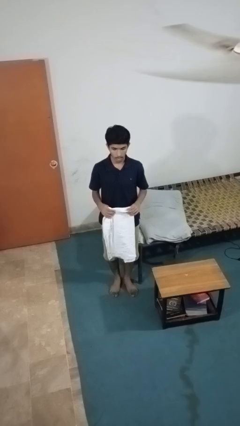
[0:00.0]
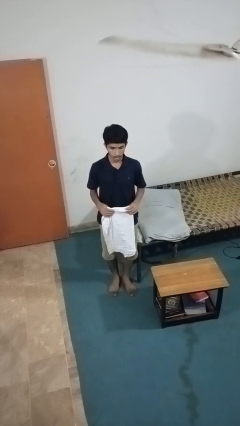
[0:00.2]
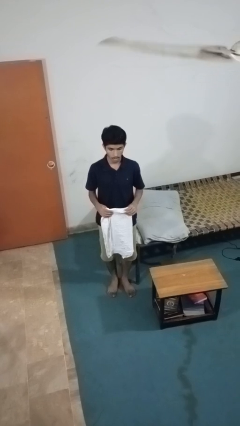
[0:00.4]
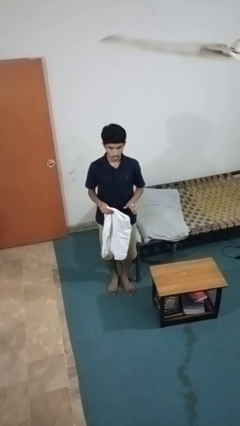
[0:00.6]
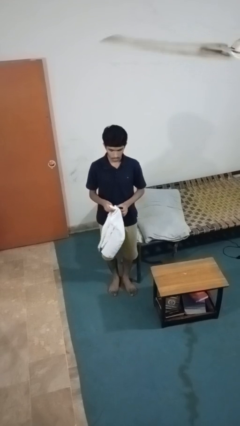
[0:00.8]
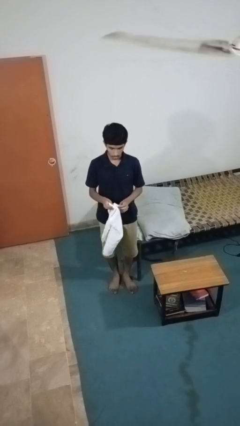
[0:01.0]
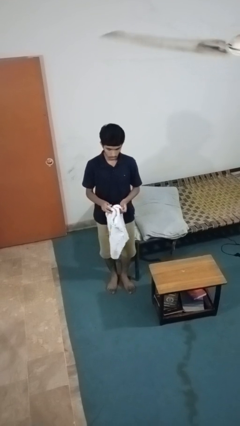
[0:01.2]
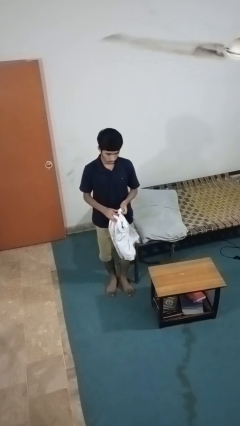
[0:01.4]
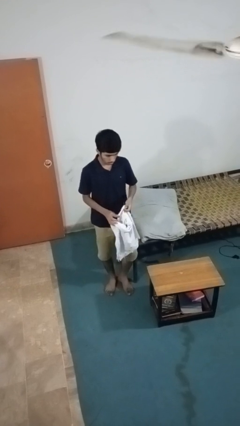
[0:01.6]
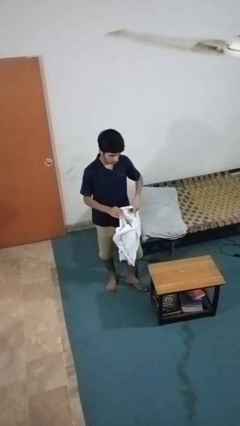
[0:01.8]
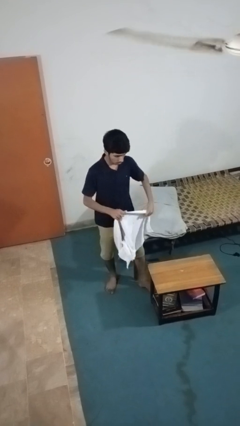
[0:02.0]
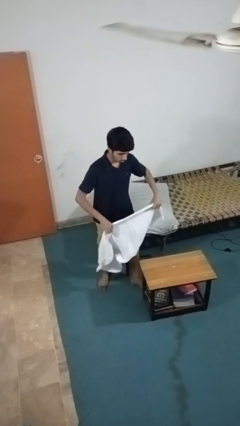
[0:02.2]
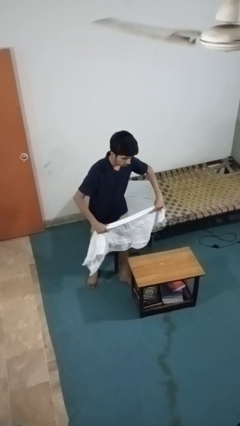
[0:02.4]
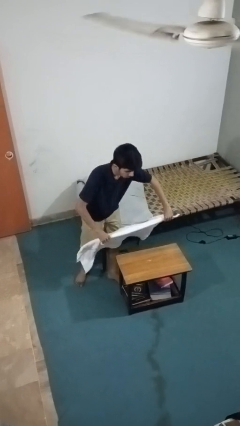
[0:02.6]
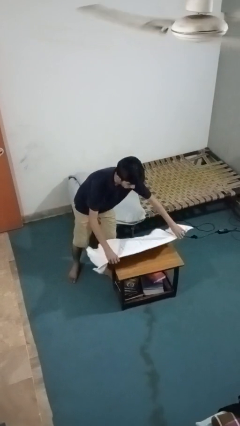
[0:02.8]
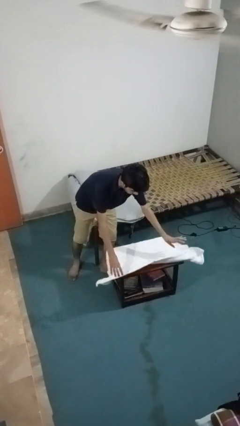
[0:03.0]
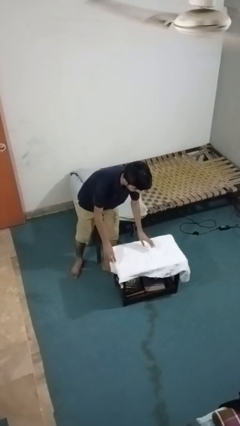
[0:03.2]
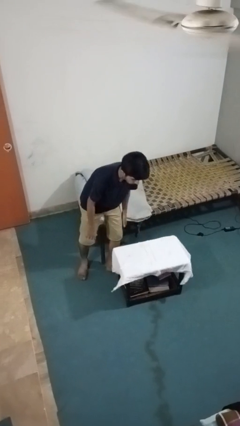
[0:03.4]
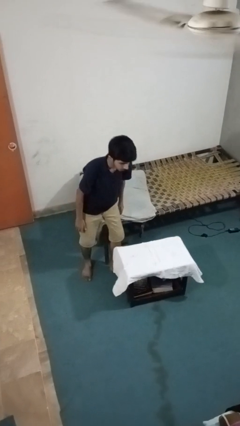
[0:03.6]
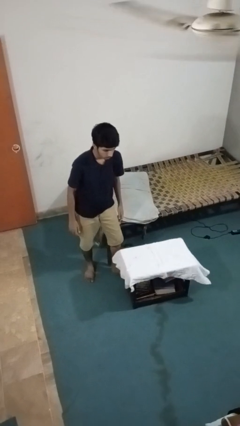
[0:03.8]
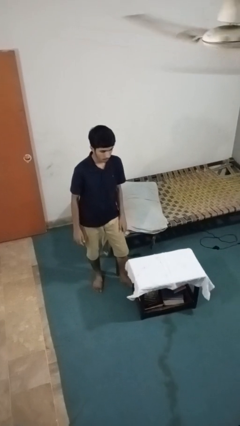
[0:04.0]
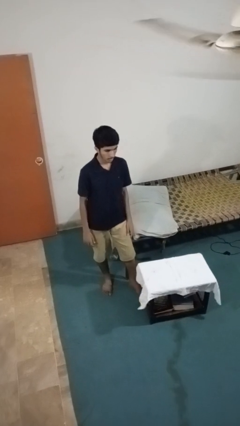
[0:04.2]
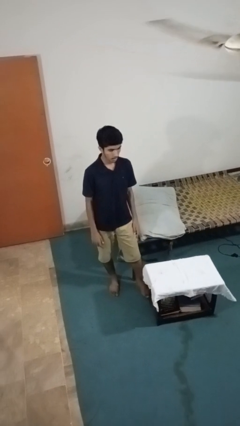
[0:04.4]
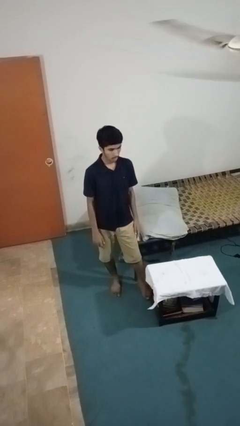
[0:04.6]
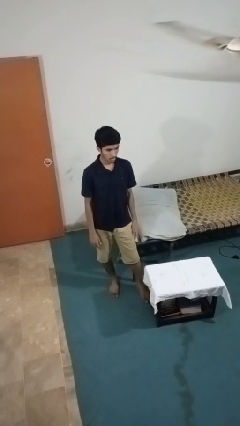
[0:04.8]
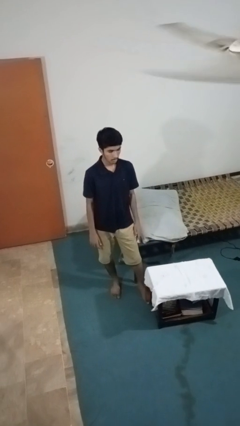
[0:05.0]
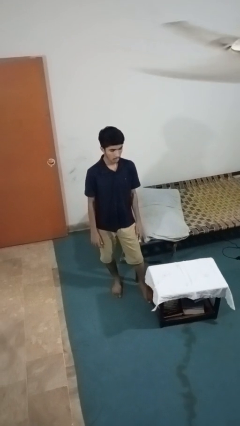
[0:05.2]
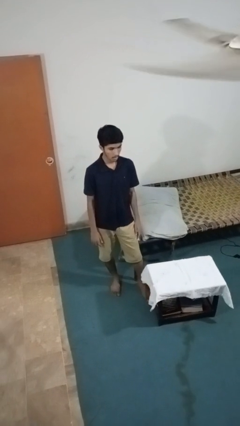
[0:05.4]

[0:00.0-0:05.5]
person spreads tablecloth

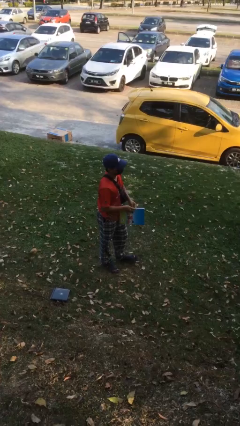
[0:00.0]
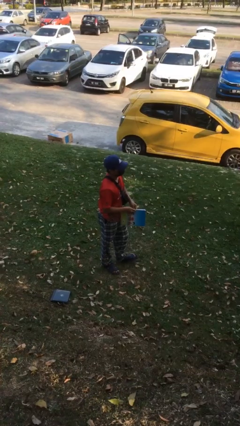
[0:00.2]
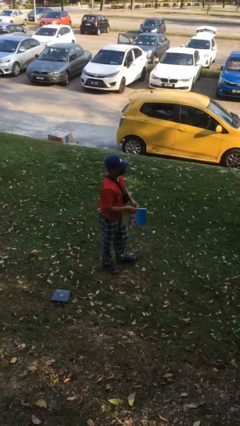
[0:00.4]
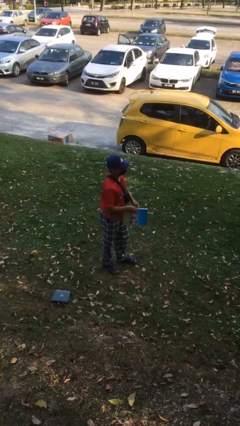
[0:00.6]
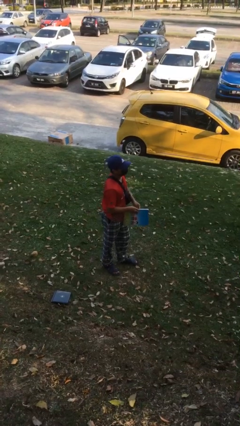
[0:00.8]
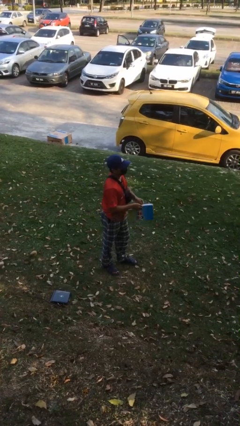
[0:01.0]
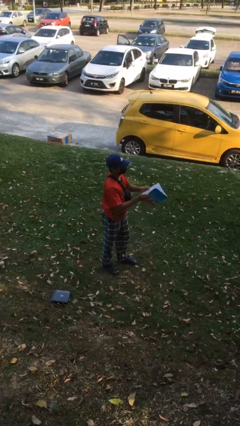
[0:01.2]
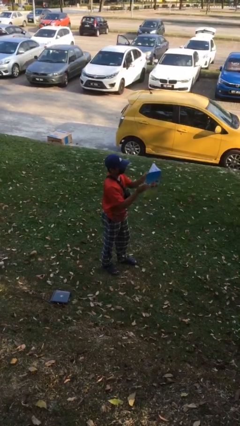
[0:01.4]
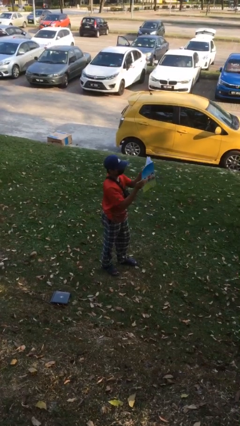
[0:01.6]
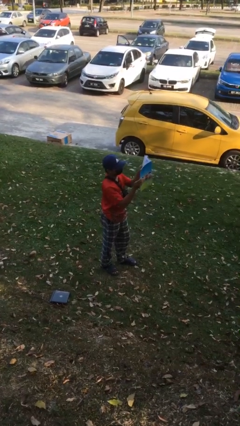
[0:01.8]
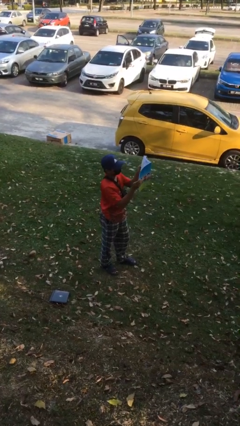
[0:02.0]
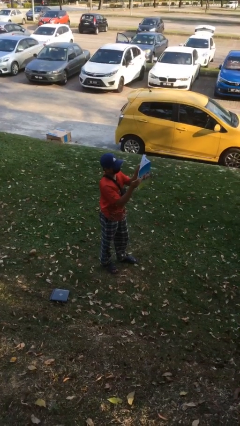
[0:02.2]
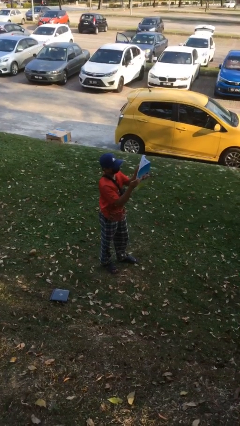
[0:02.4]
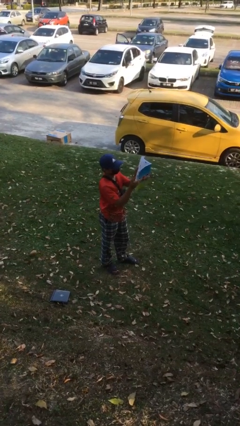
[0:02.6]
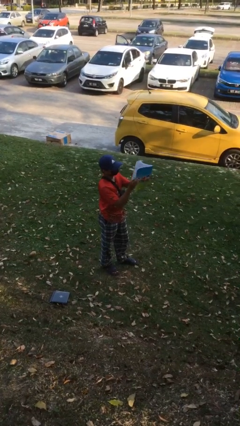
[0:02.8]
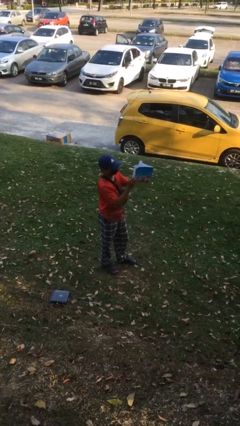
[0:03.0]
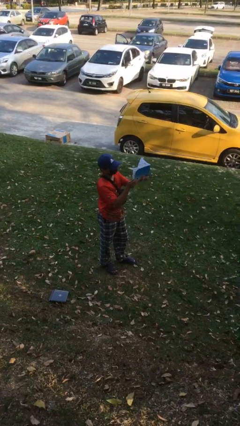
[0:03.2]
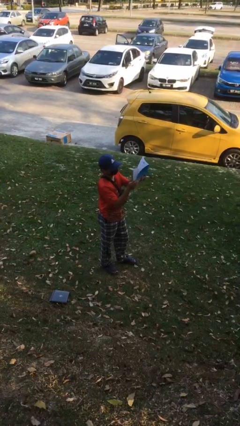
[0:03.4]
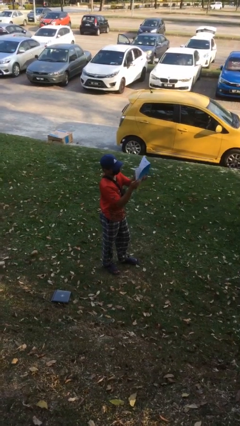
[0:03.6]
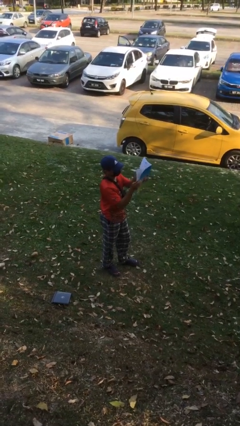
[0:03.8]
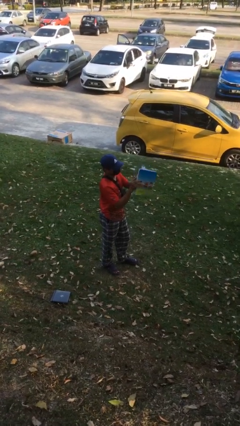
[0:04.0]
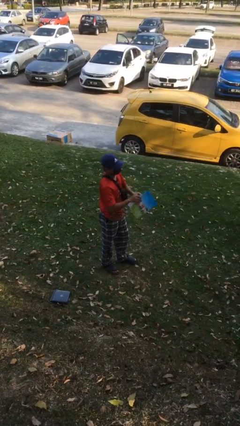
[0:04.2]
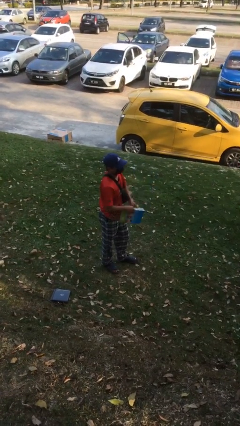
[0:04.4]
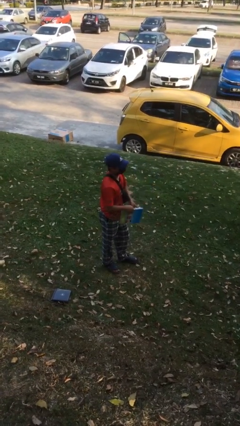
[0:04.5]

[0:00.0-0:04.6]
person reads document

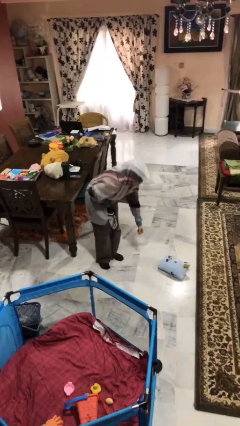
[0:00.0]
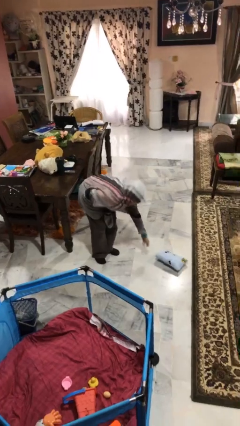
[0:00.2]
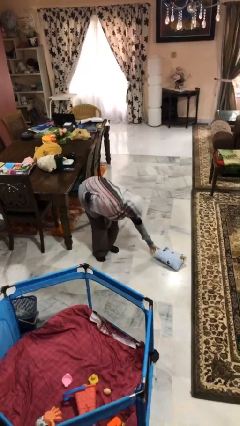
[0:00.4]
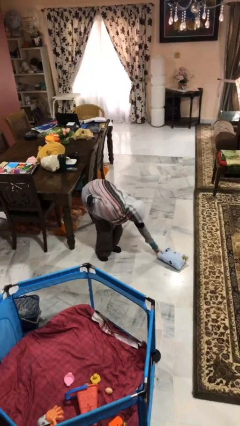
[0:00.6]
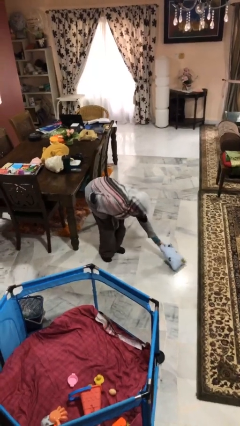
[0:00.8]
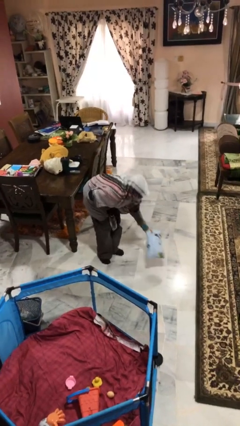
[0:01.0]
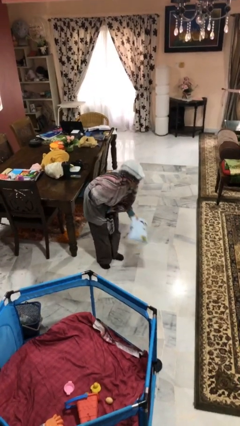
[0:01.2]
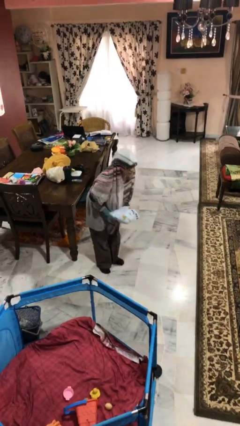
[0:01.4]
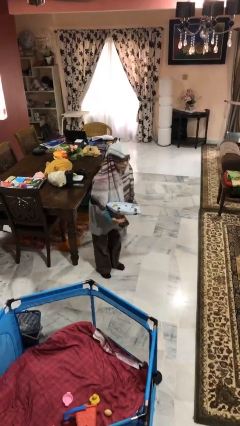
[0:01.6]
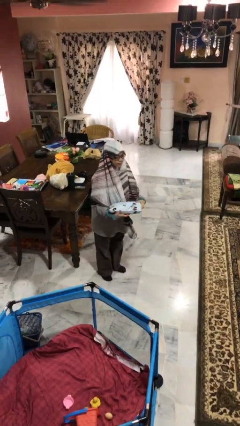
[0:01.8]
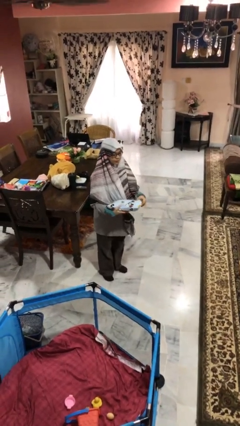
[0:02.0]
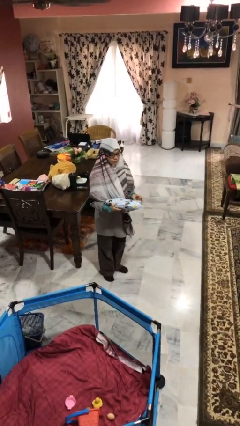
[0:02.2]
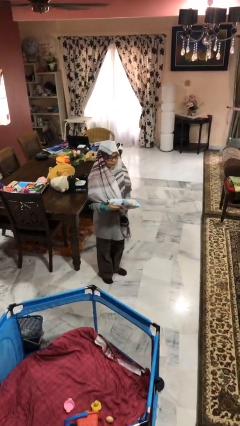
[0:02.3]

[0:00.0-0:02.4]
person picks up object from floor

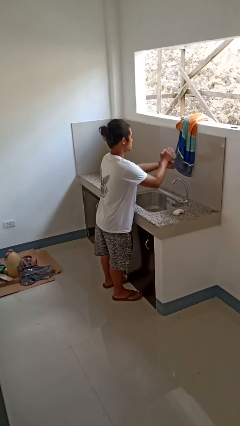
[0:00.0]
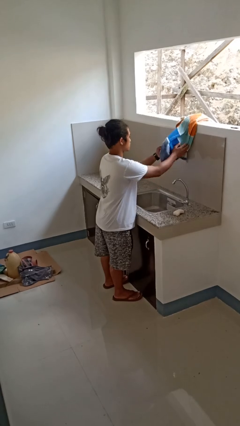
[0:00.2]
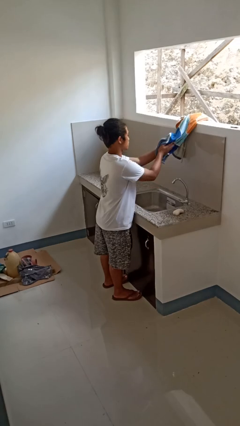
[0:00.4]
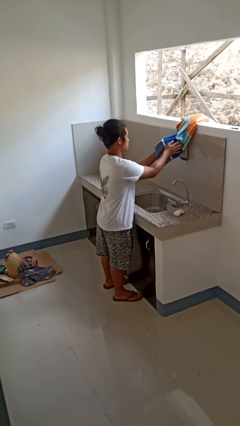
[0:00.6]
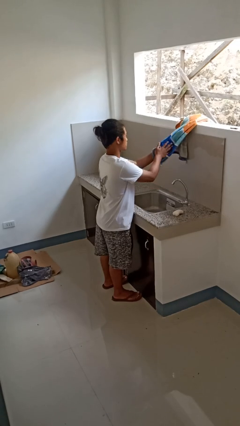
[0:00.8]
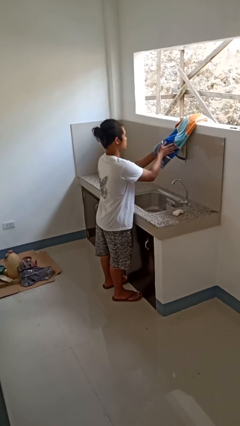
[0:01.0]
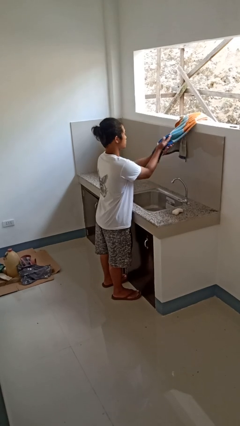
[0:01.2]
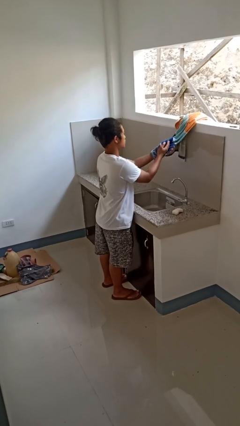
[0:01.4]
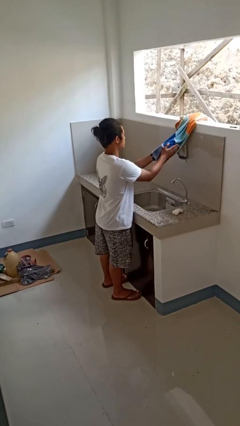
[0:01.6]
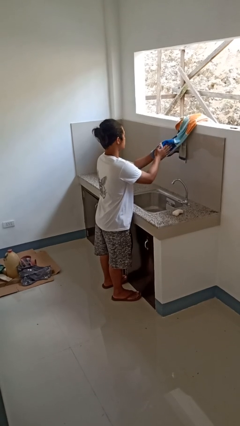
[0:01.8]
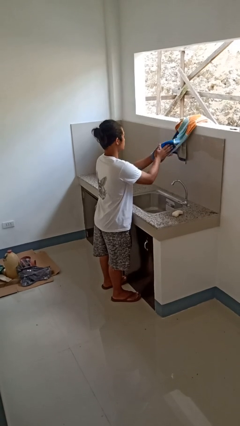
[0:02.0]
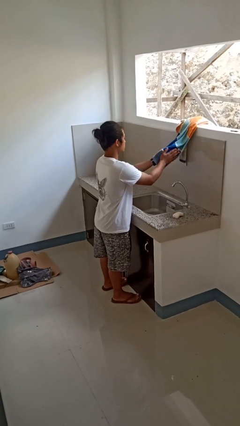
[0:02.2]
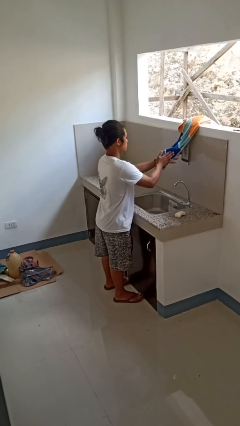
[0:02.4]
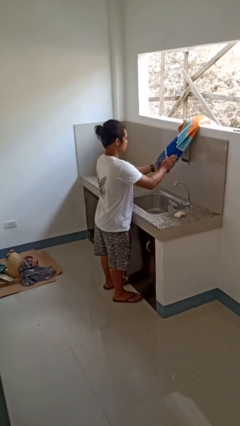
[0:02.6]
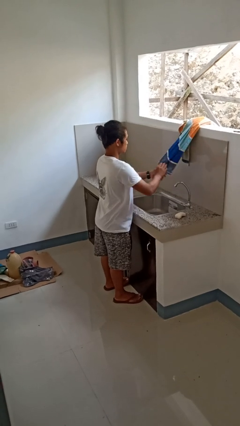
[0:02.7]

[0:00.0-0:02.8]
person dries hands with towel

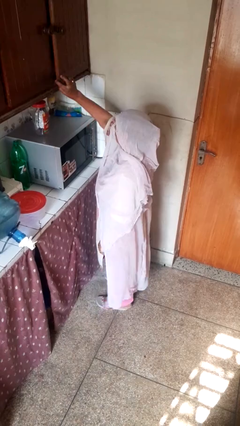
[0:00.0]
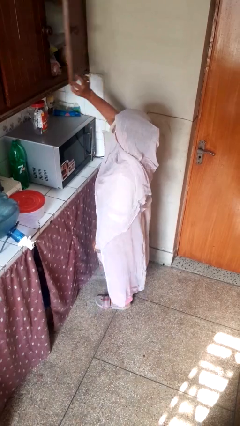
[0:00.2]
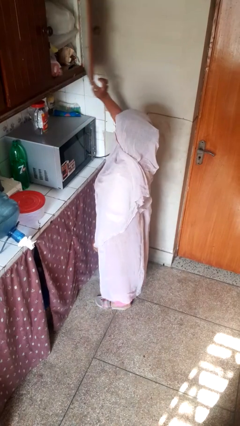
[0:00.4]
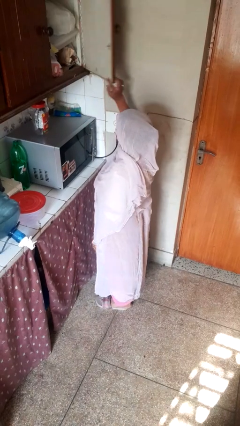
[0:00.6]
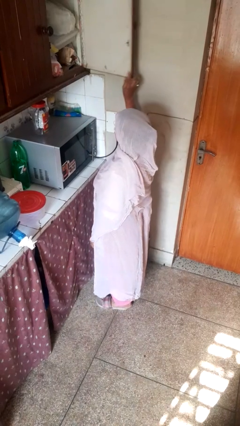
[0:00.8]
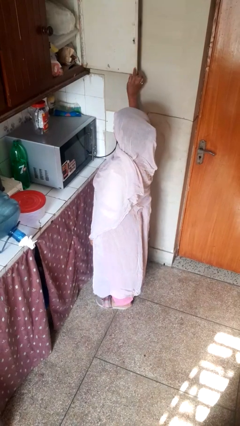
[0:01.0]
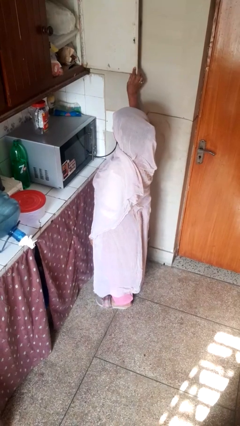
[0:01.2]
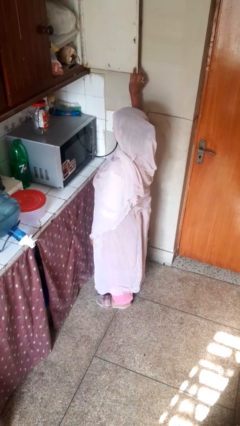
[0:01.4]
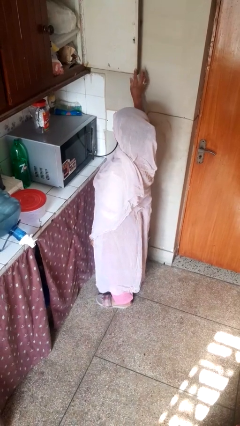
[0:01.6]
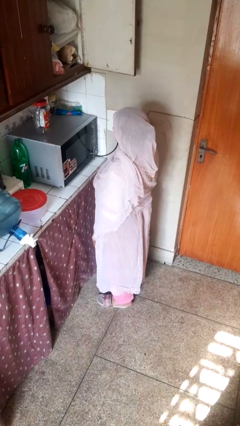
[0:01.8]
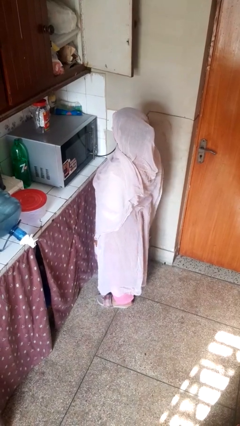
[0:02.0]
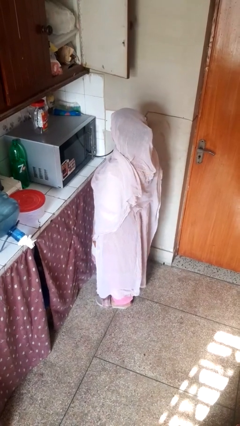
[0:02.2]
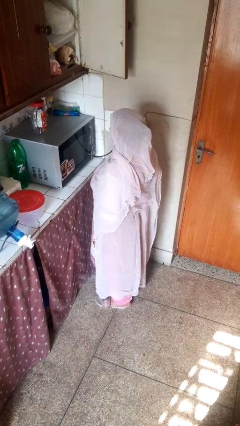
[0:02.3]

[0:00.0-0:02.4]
person opens cabinet
